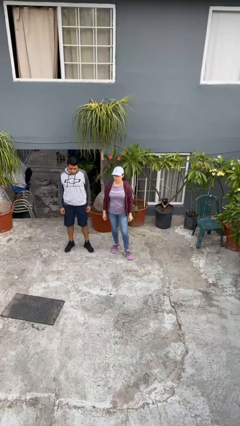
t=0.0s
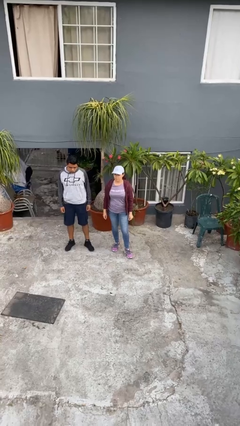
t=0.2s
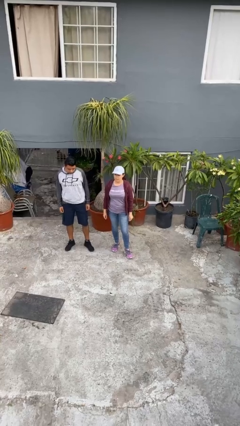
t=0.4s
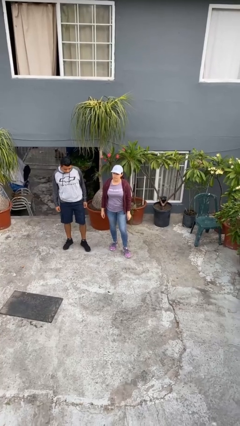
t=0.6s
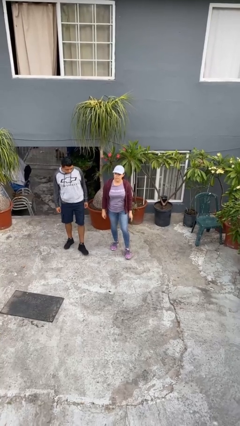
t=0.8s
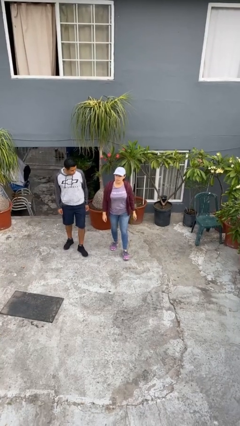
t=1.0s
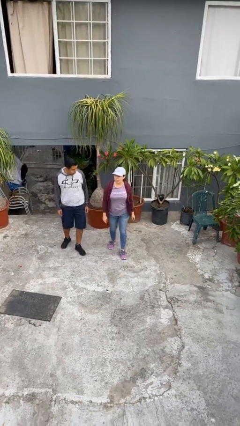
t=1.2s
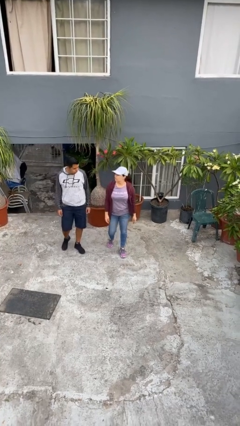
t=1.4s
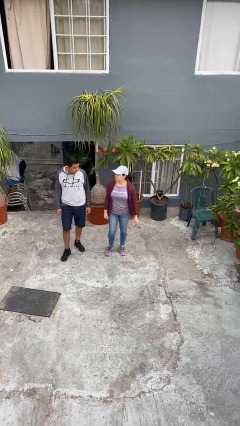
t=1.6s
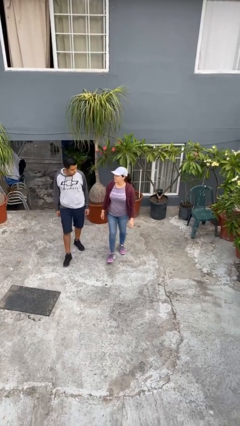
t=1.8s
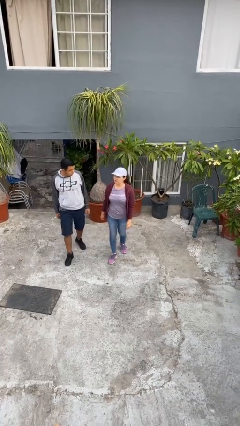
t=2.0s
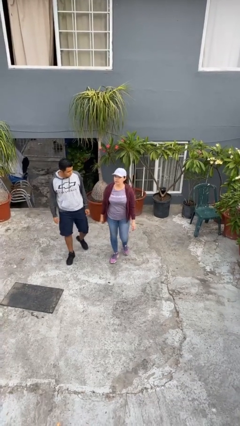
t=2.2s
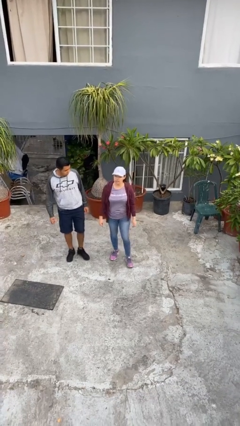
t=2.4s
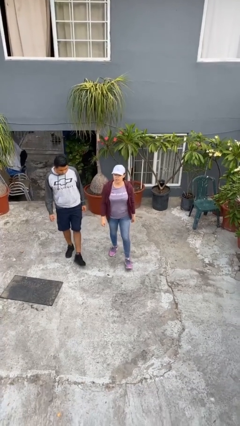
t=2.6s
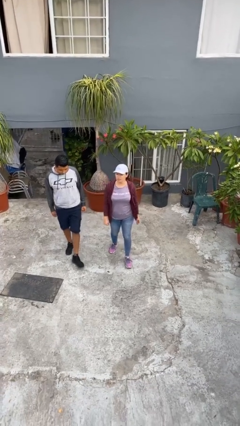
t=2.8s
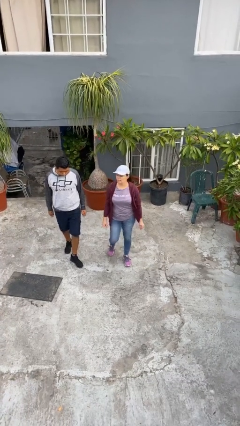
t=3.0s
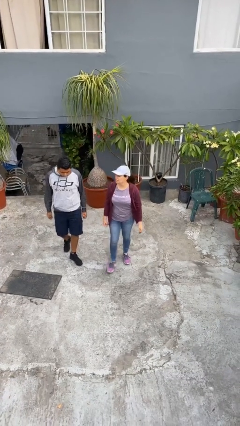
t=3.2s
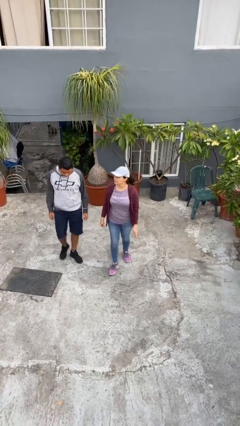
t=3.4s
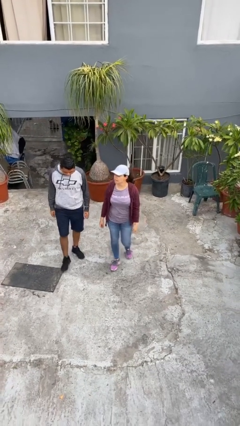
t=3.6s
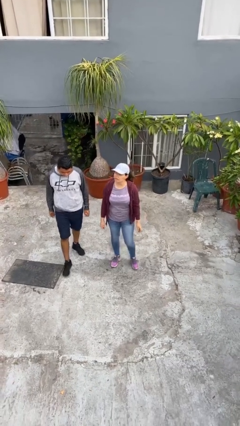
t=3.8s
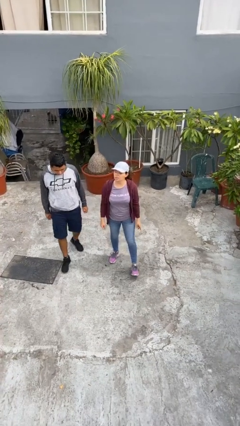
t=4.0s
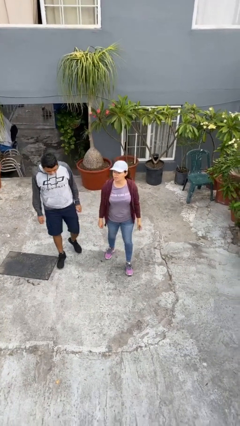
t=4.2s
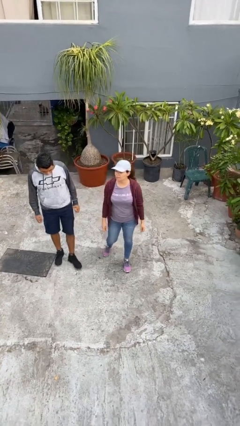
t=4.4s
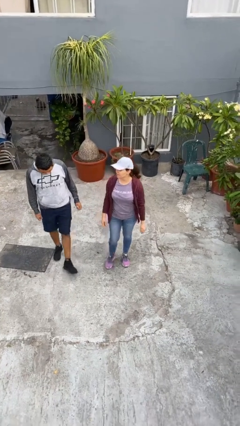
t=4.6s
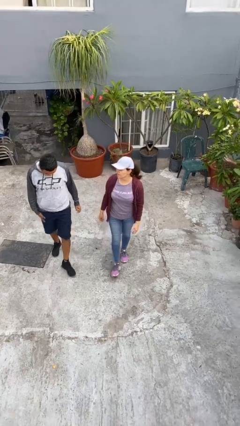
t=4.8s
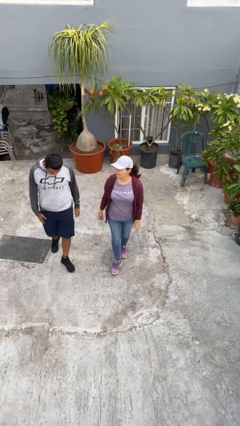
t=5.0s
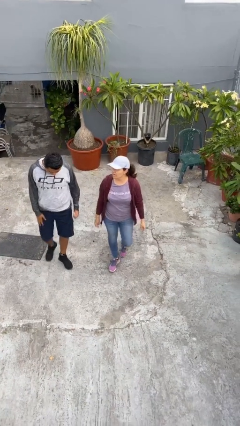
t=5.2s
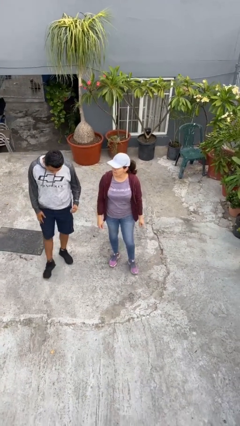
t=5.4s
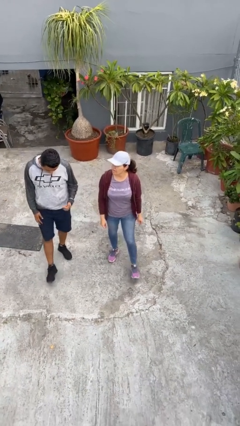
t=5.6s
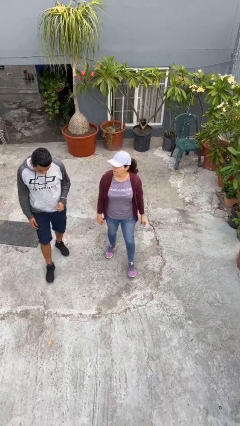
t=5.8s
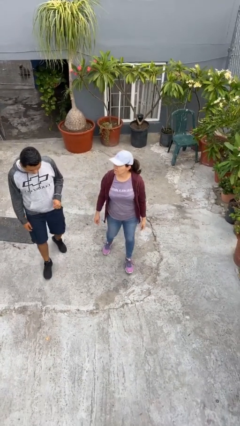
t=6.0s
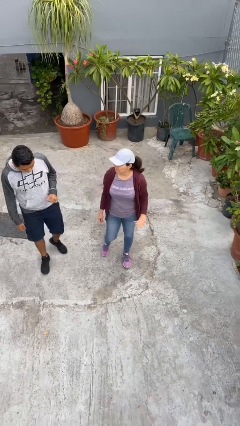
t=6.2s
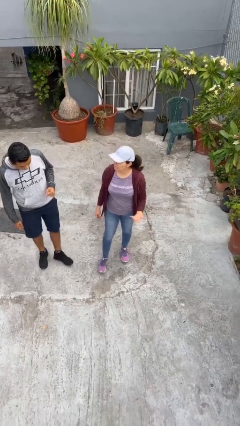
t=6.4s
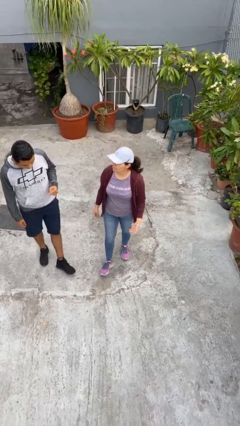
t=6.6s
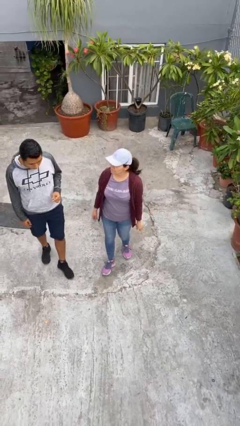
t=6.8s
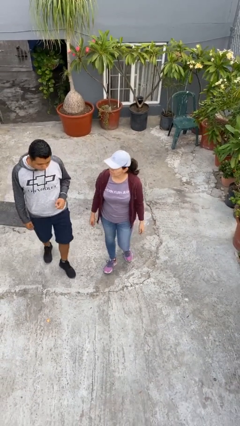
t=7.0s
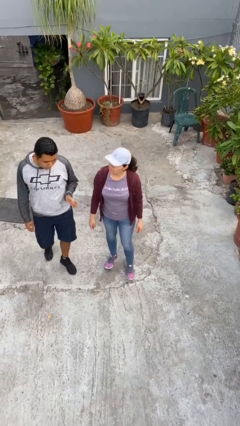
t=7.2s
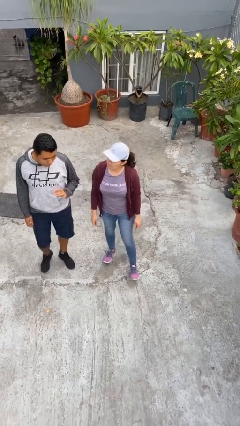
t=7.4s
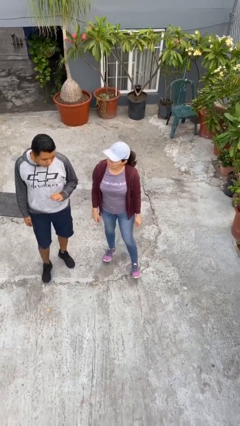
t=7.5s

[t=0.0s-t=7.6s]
person talks to person

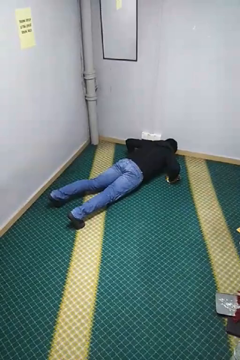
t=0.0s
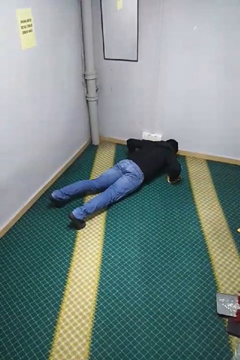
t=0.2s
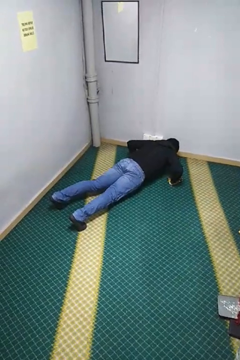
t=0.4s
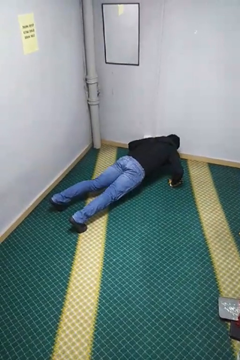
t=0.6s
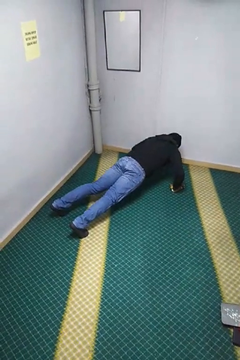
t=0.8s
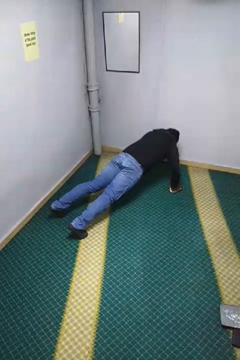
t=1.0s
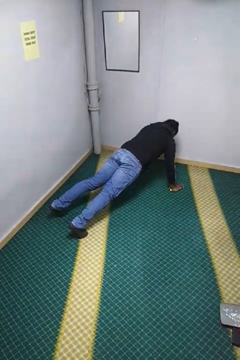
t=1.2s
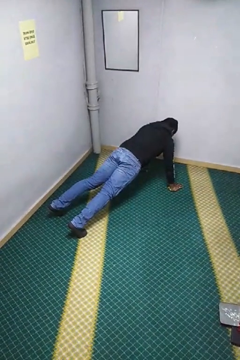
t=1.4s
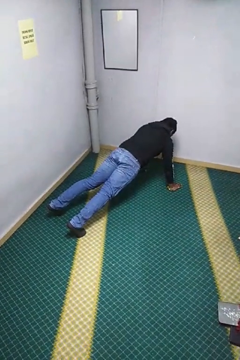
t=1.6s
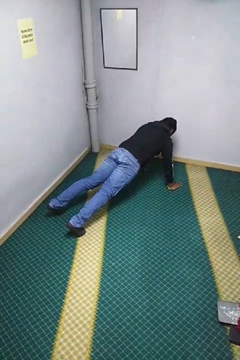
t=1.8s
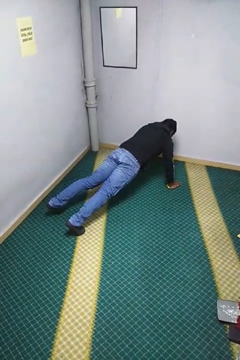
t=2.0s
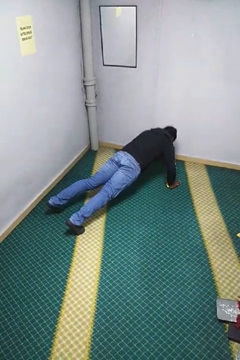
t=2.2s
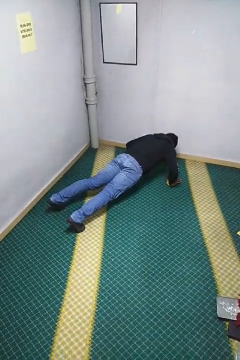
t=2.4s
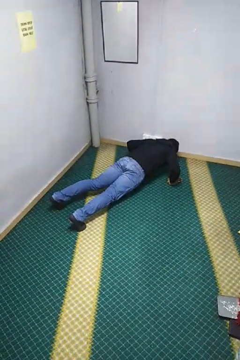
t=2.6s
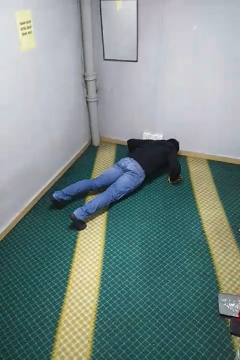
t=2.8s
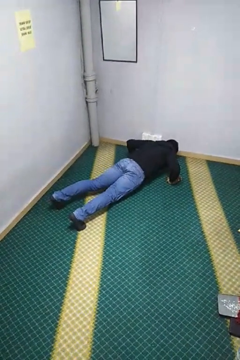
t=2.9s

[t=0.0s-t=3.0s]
person exercises with pushup

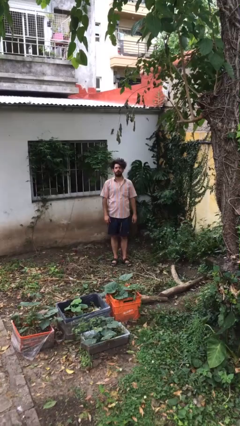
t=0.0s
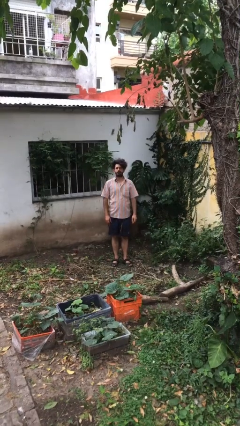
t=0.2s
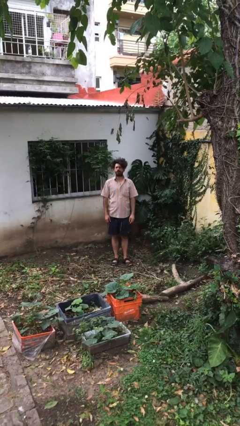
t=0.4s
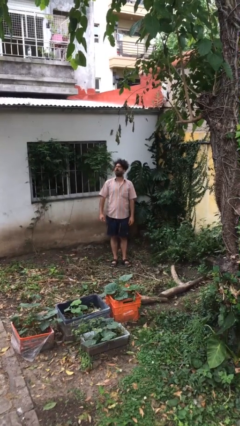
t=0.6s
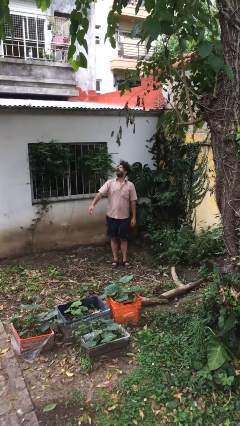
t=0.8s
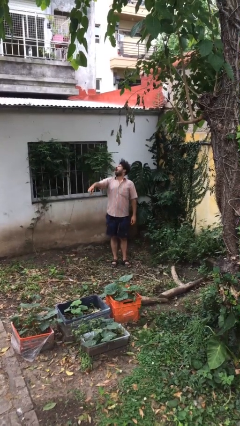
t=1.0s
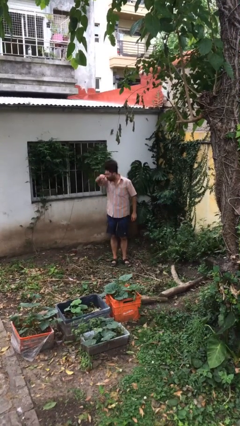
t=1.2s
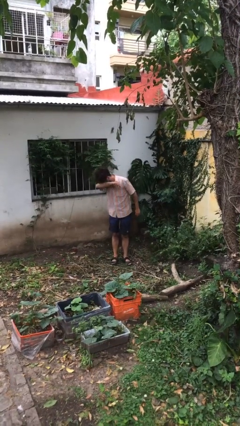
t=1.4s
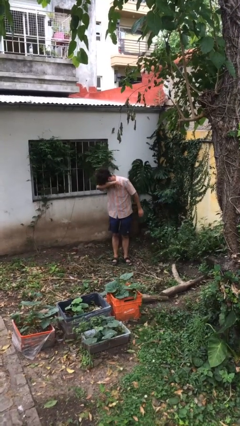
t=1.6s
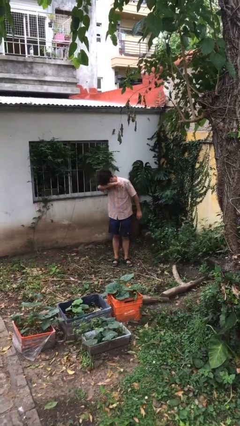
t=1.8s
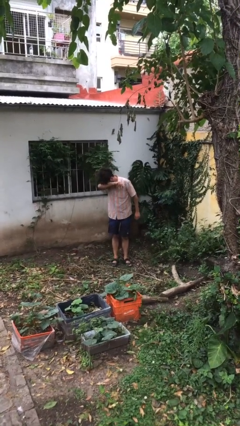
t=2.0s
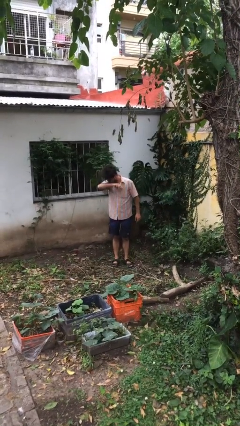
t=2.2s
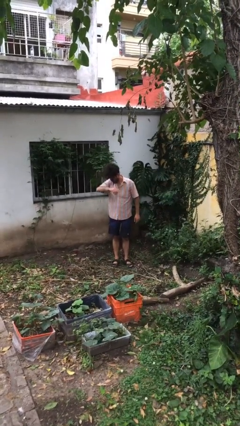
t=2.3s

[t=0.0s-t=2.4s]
person sneezes into arm

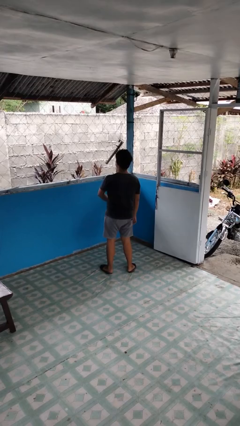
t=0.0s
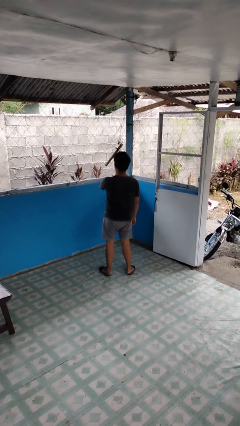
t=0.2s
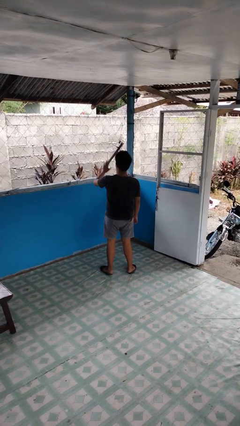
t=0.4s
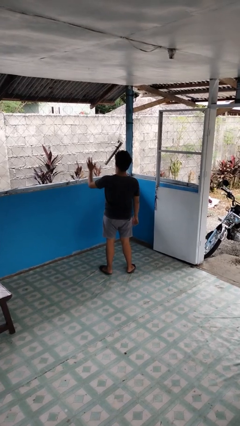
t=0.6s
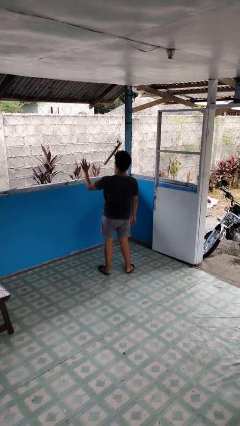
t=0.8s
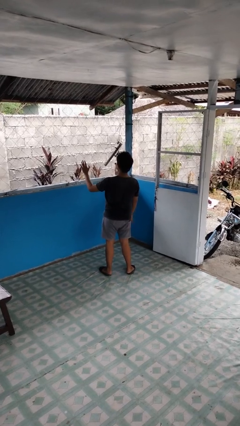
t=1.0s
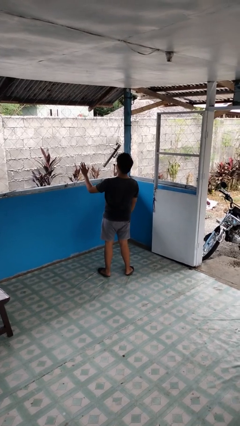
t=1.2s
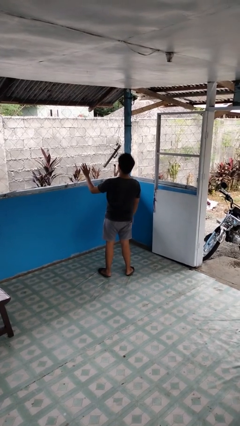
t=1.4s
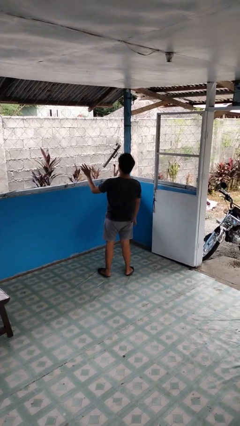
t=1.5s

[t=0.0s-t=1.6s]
person gestures swipe left

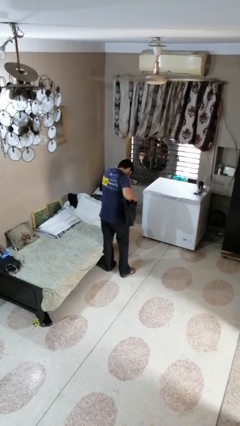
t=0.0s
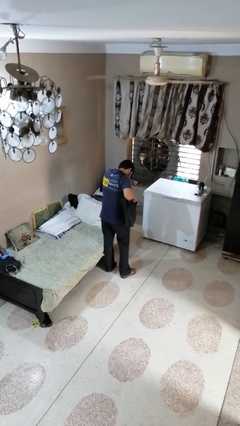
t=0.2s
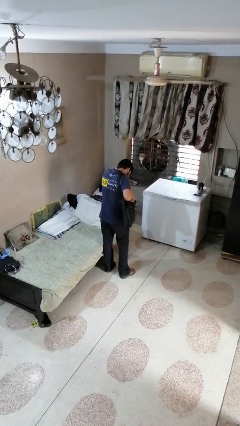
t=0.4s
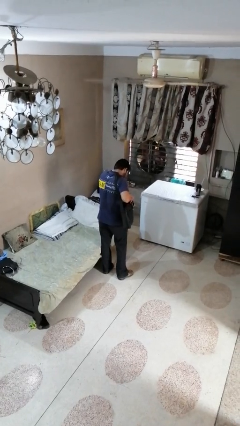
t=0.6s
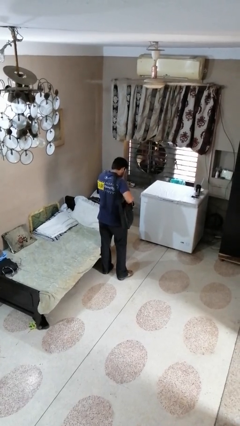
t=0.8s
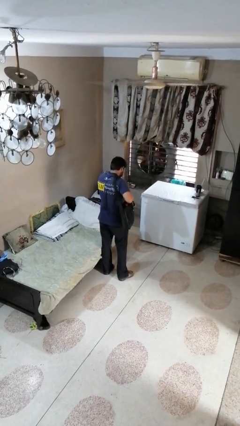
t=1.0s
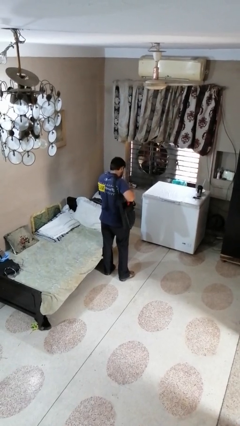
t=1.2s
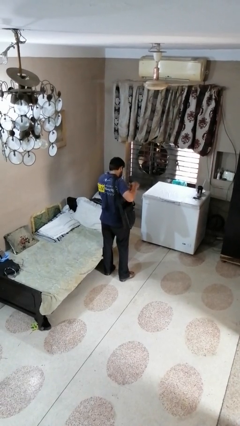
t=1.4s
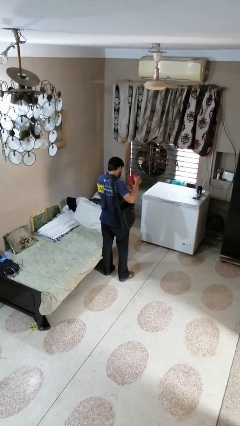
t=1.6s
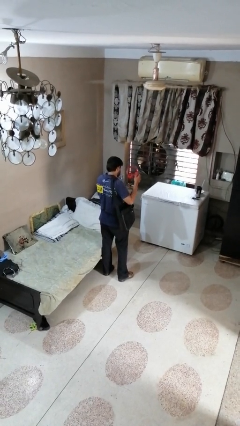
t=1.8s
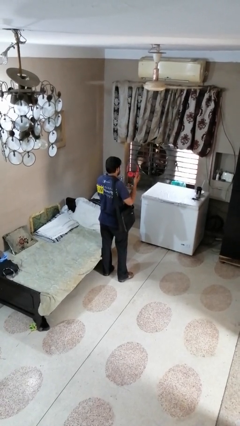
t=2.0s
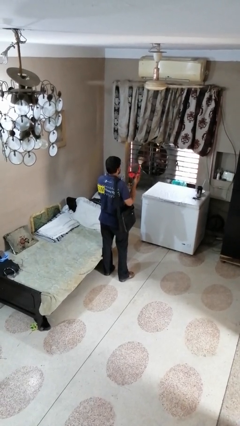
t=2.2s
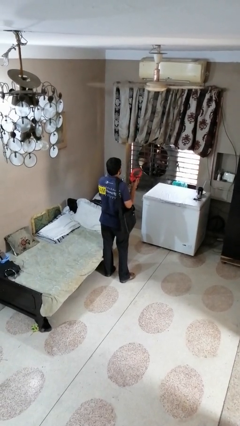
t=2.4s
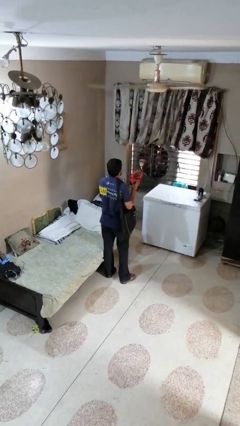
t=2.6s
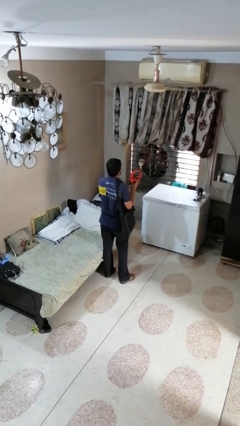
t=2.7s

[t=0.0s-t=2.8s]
person takes object from backpack

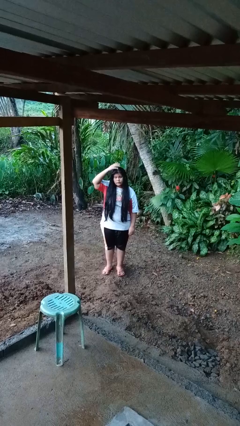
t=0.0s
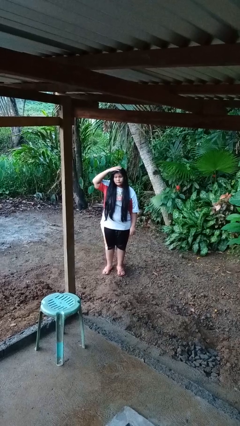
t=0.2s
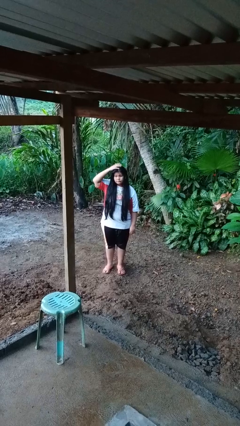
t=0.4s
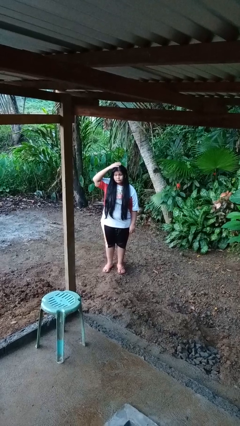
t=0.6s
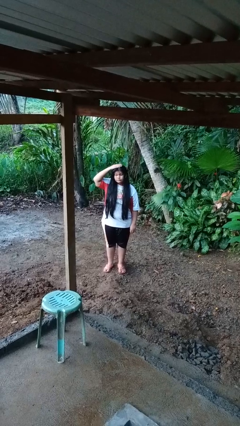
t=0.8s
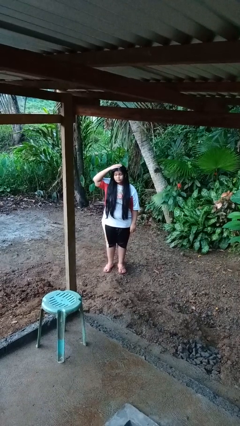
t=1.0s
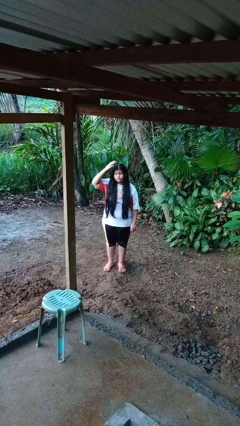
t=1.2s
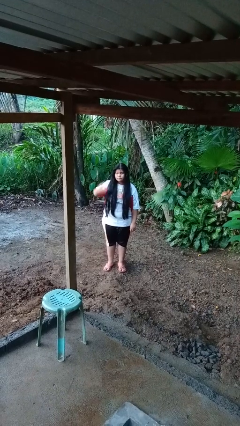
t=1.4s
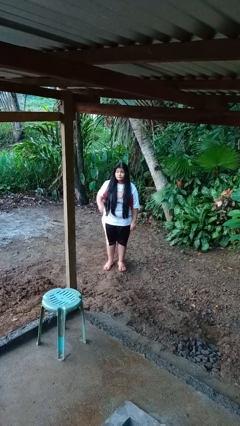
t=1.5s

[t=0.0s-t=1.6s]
person pats head
